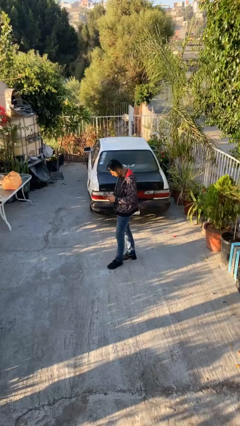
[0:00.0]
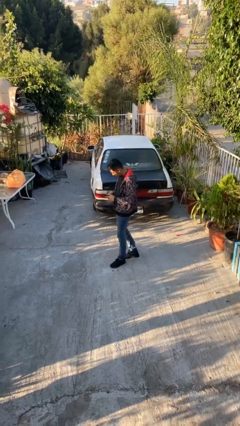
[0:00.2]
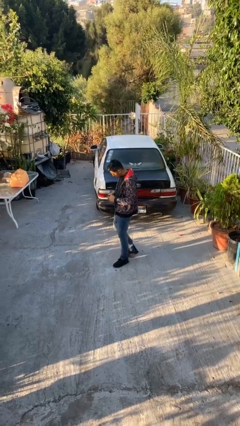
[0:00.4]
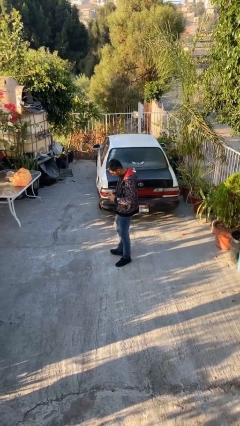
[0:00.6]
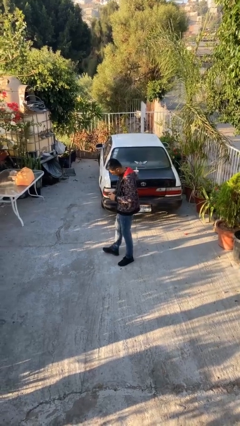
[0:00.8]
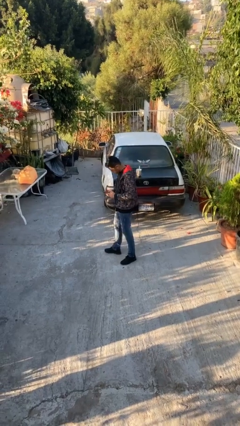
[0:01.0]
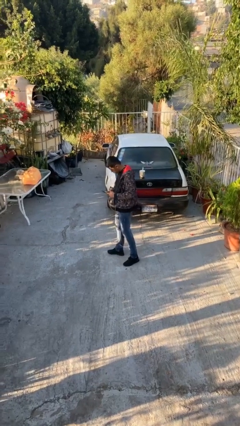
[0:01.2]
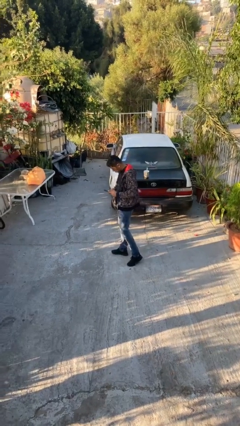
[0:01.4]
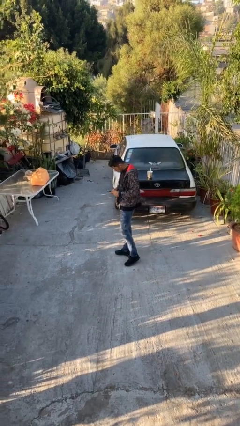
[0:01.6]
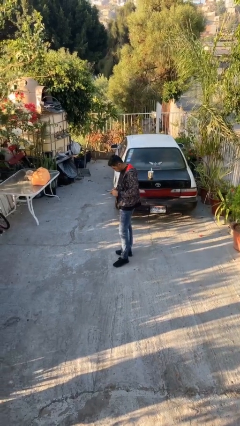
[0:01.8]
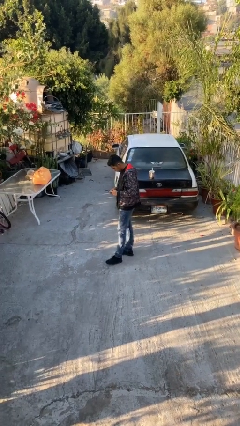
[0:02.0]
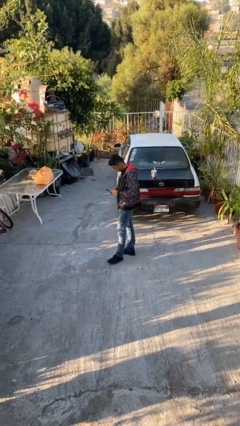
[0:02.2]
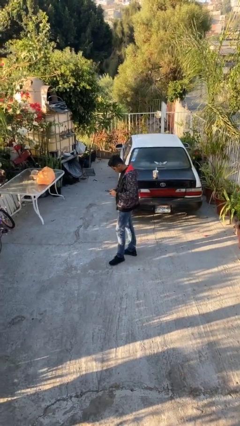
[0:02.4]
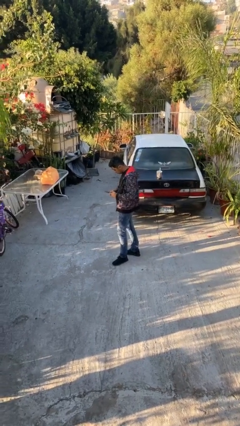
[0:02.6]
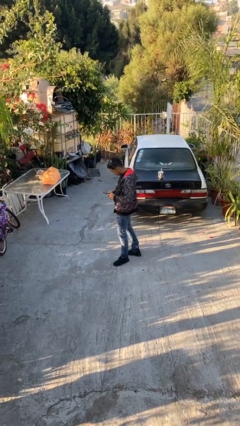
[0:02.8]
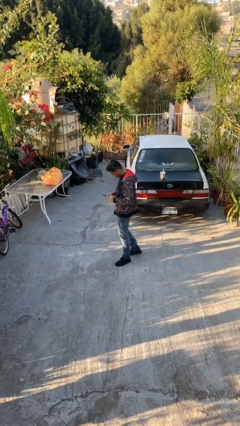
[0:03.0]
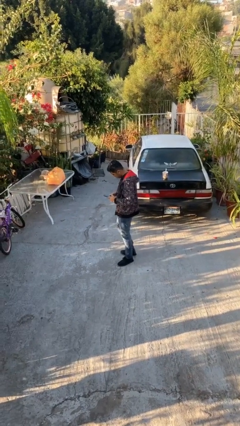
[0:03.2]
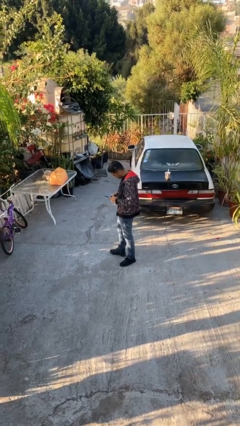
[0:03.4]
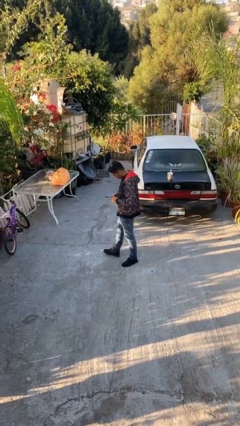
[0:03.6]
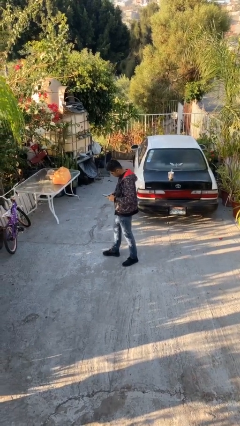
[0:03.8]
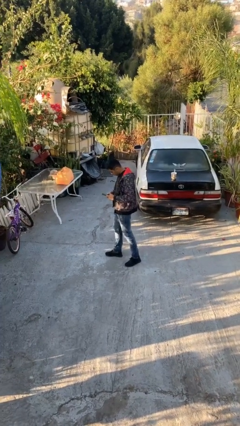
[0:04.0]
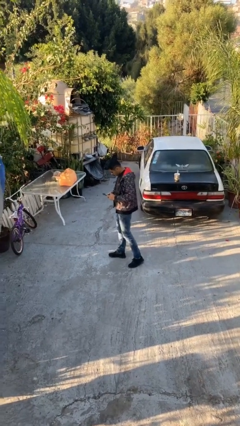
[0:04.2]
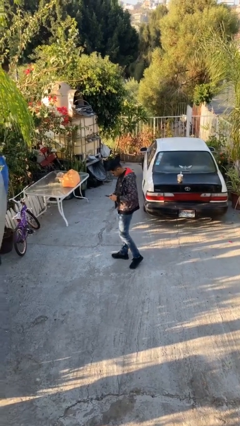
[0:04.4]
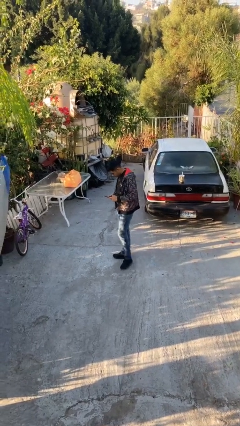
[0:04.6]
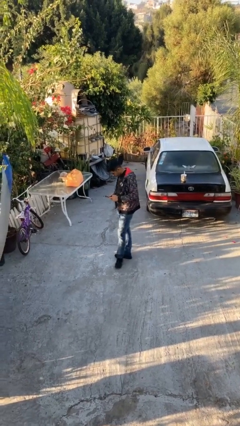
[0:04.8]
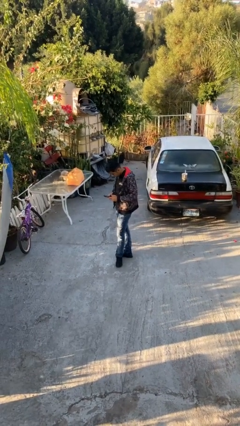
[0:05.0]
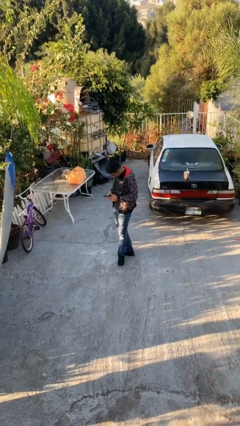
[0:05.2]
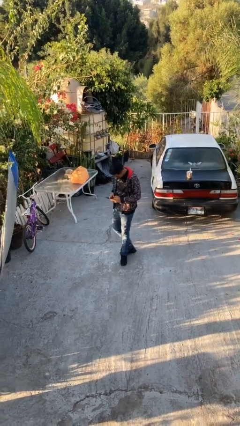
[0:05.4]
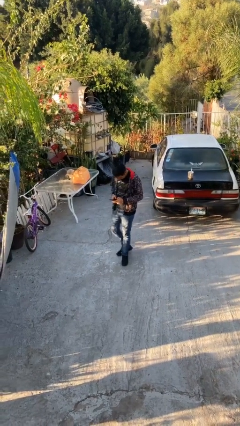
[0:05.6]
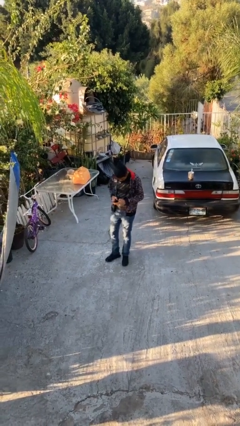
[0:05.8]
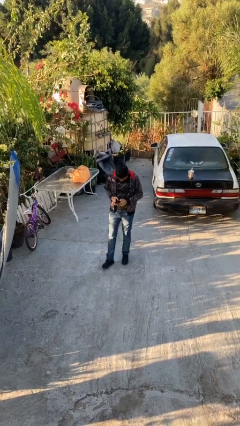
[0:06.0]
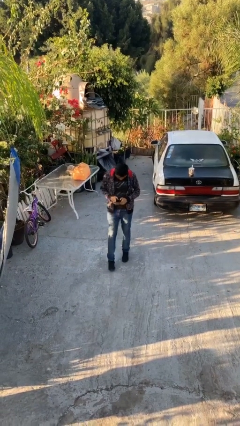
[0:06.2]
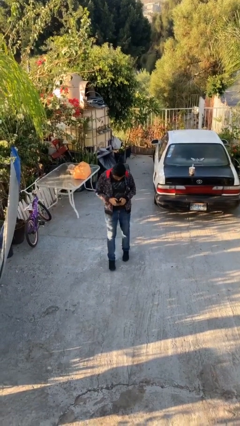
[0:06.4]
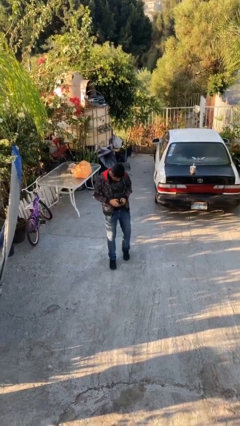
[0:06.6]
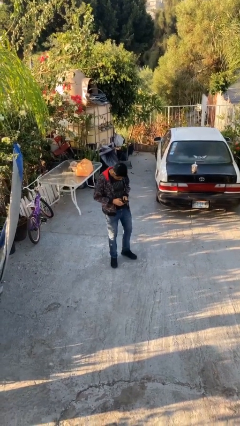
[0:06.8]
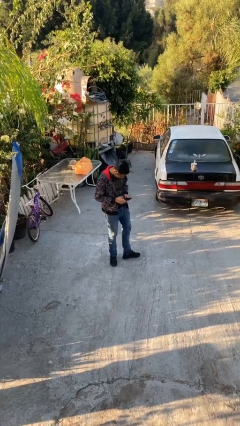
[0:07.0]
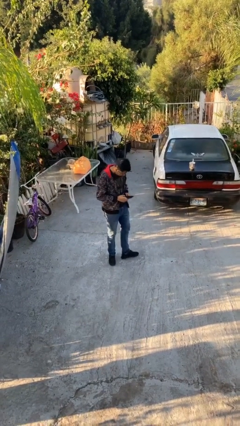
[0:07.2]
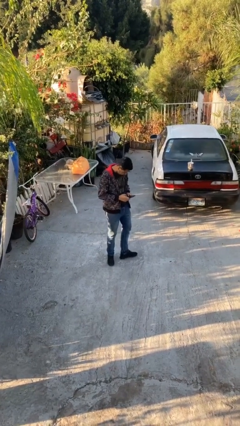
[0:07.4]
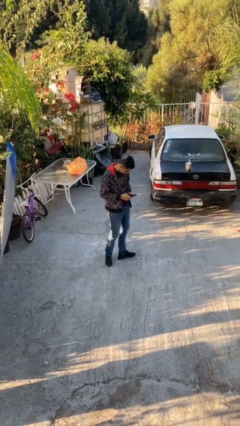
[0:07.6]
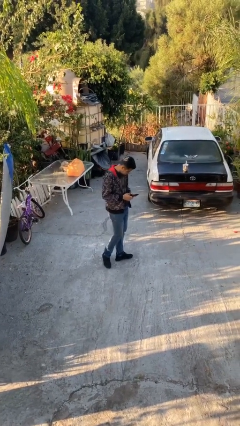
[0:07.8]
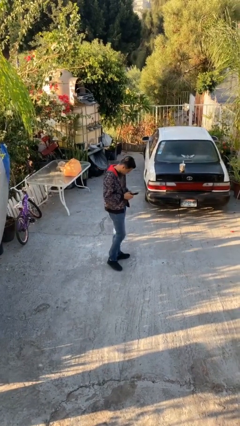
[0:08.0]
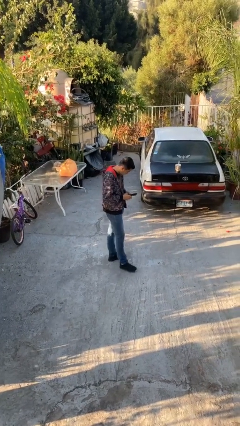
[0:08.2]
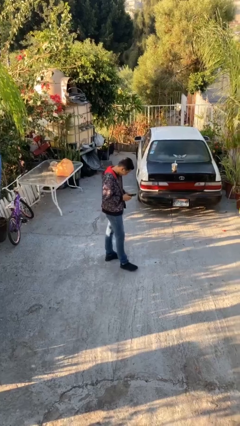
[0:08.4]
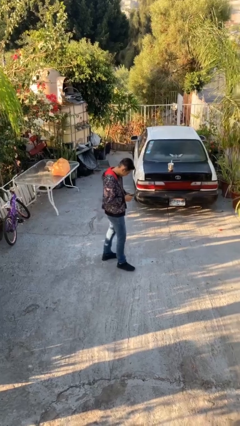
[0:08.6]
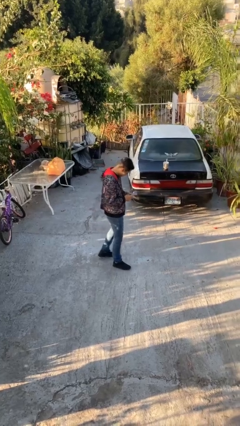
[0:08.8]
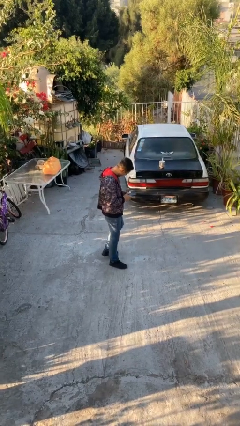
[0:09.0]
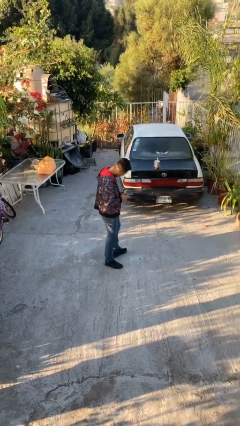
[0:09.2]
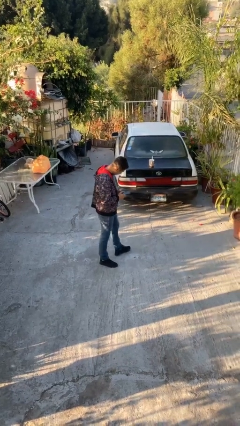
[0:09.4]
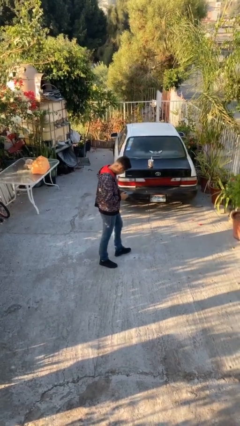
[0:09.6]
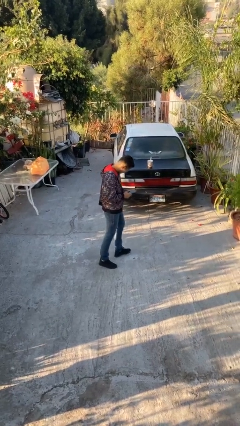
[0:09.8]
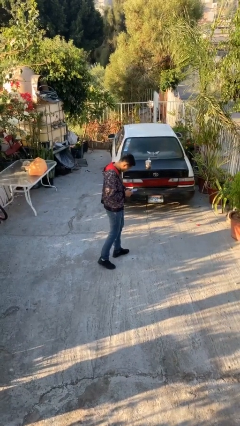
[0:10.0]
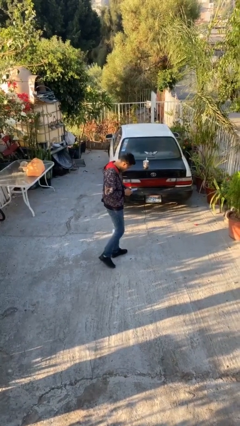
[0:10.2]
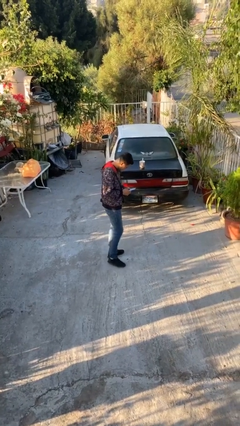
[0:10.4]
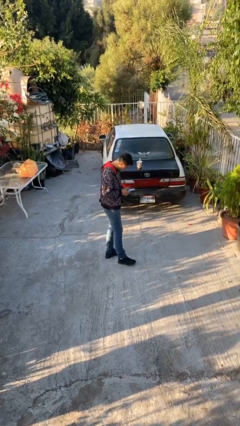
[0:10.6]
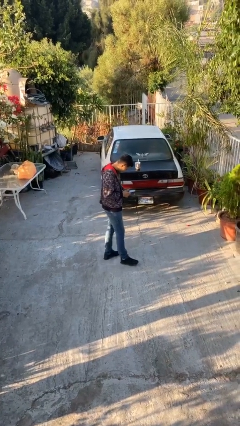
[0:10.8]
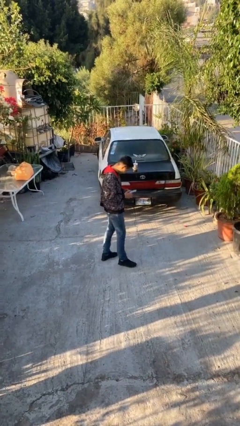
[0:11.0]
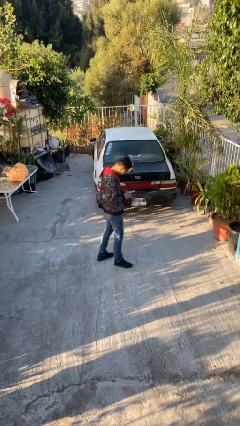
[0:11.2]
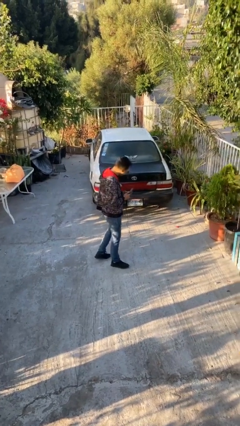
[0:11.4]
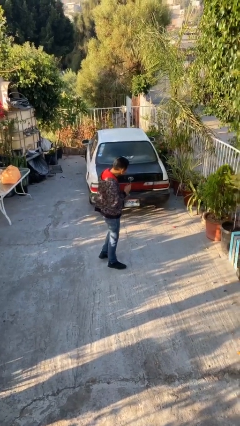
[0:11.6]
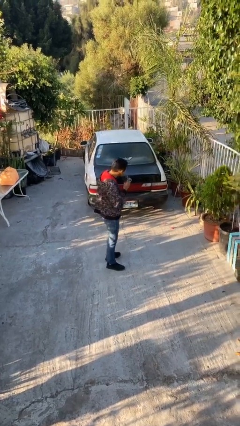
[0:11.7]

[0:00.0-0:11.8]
person texts on phone

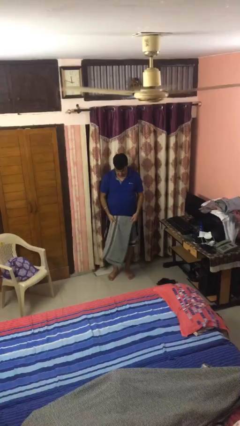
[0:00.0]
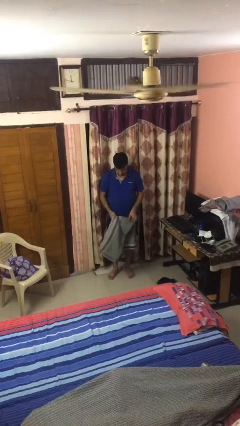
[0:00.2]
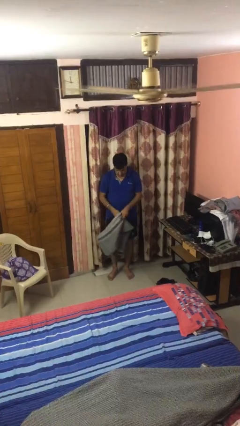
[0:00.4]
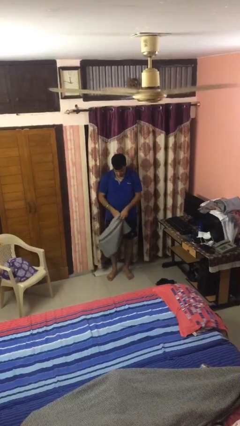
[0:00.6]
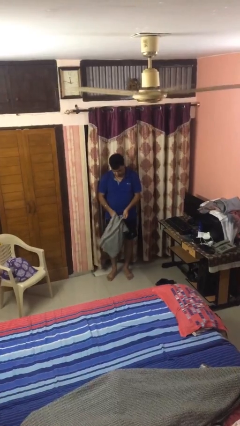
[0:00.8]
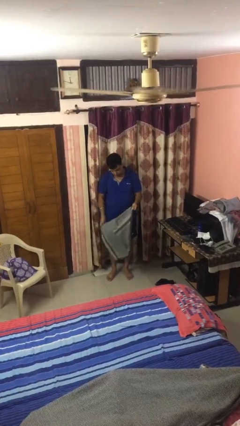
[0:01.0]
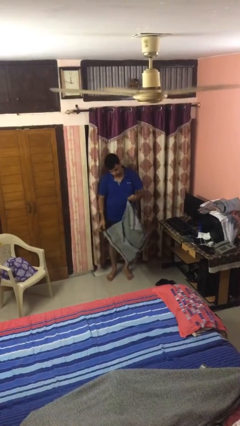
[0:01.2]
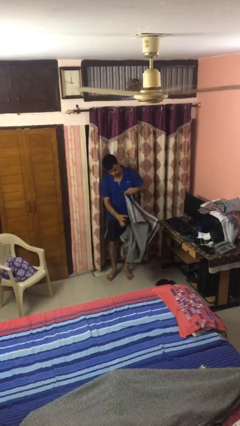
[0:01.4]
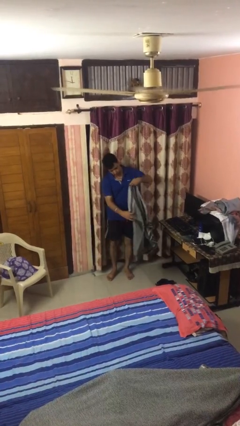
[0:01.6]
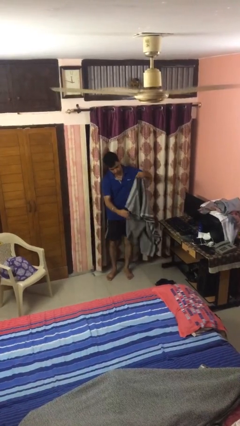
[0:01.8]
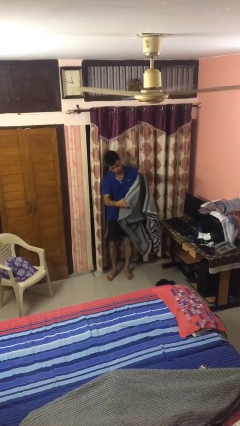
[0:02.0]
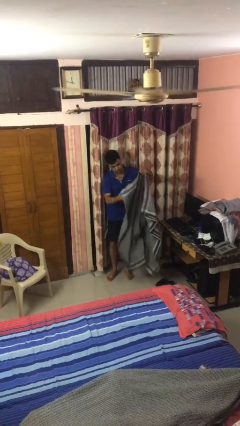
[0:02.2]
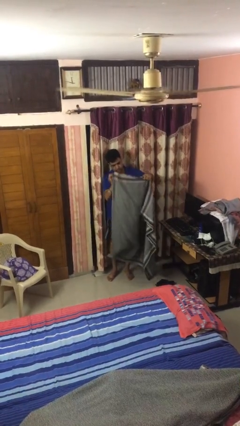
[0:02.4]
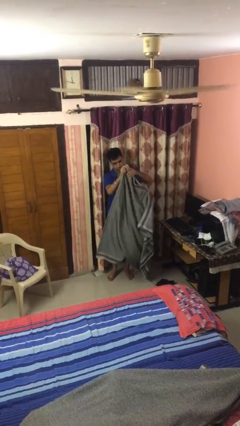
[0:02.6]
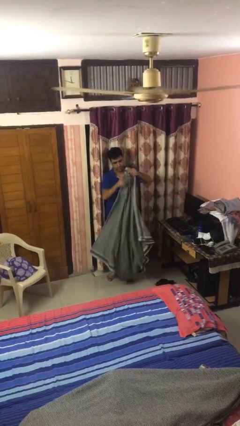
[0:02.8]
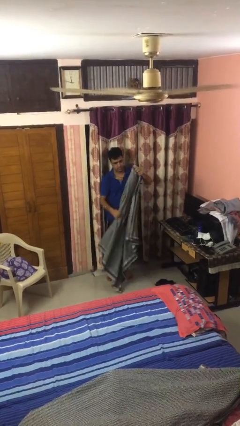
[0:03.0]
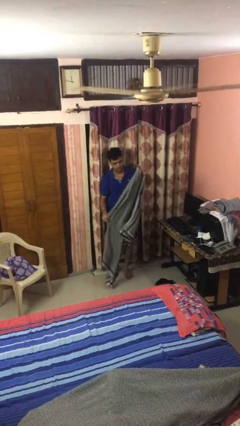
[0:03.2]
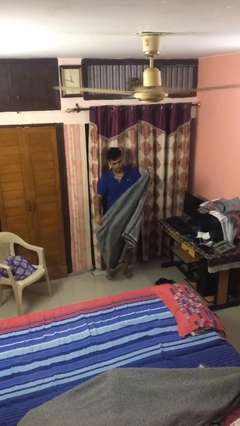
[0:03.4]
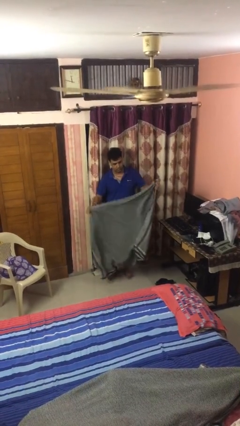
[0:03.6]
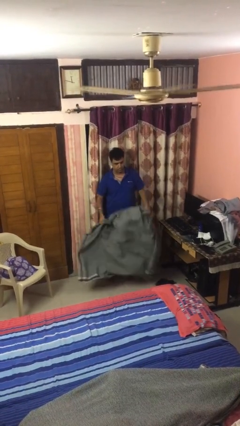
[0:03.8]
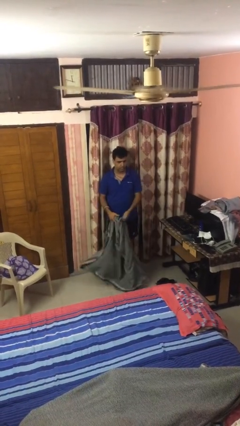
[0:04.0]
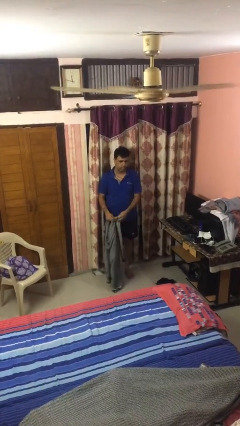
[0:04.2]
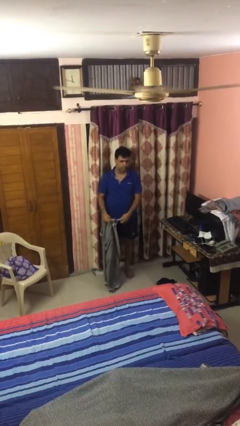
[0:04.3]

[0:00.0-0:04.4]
person unfolds blanket

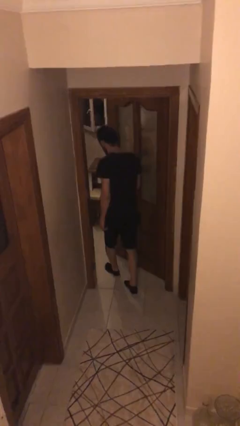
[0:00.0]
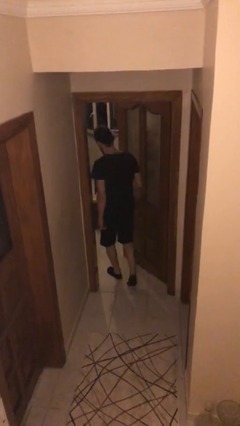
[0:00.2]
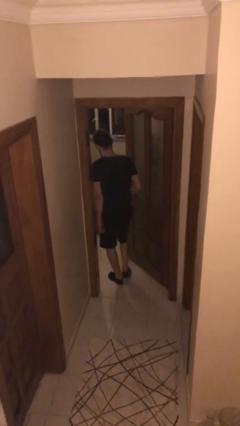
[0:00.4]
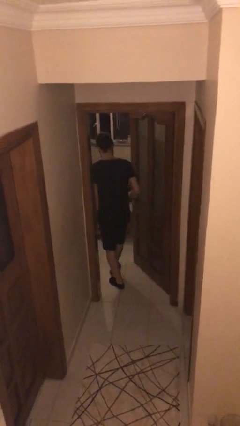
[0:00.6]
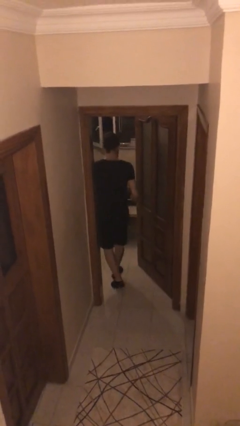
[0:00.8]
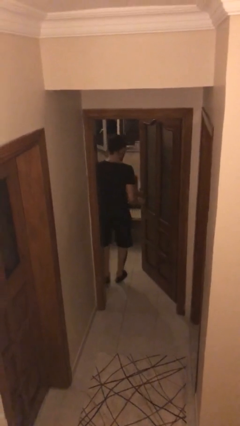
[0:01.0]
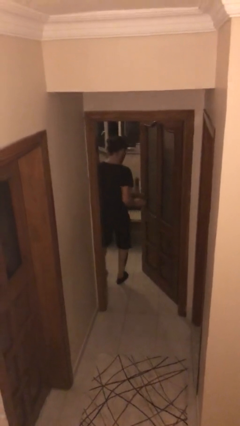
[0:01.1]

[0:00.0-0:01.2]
person exits scene through structure

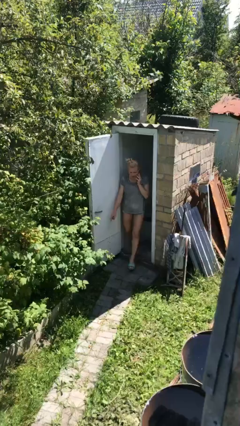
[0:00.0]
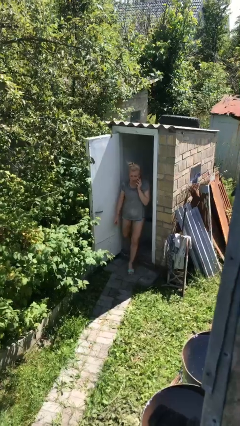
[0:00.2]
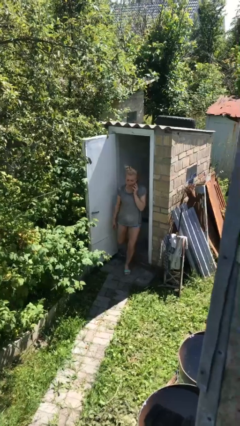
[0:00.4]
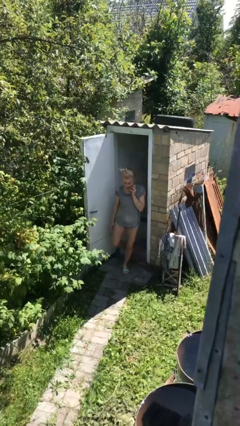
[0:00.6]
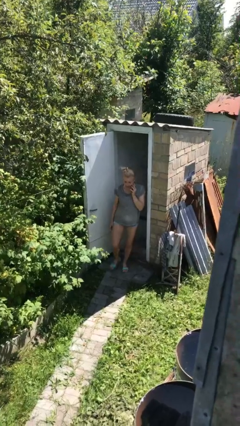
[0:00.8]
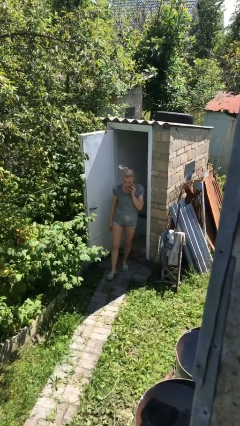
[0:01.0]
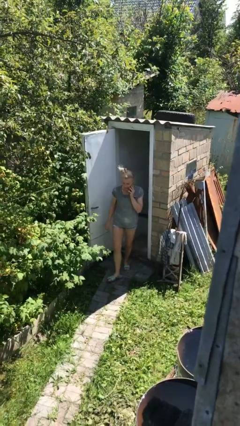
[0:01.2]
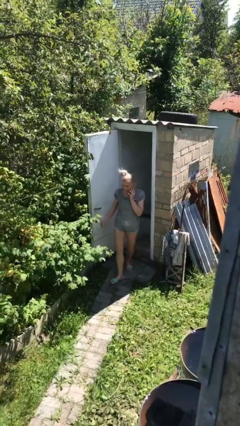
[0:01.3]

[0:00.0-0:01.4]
person enters scene through structure
